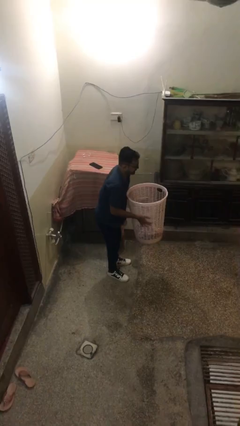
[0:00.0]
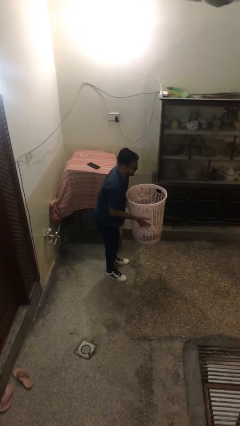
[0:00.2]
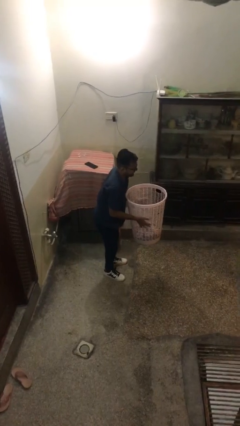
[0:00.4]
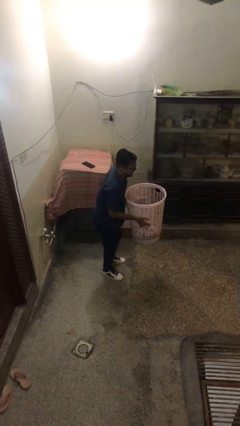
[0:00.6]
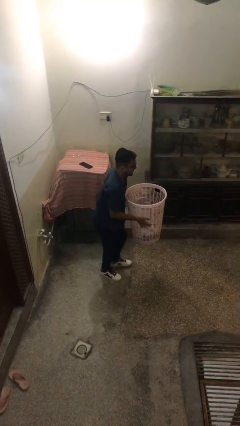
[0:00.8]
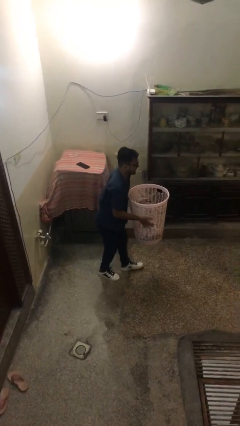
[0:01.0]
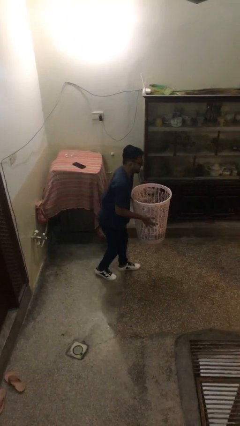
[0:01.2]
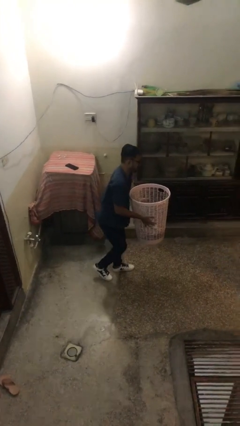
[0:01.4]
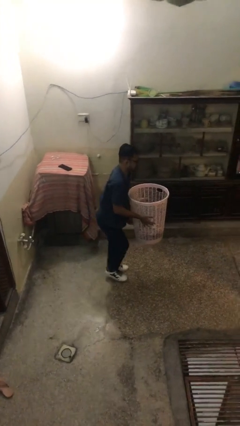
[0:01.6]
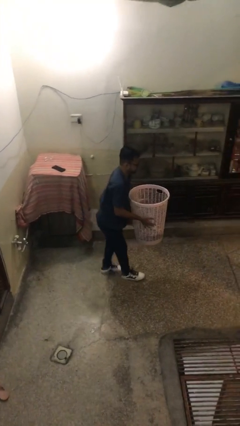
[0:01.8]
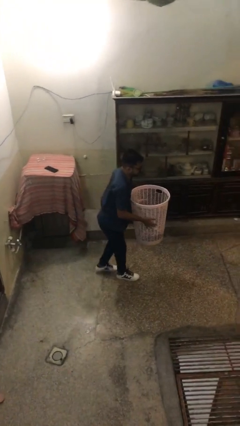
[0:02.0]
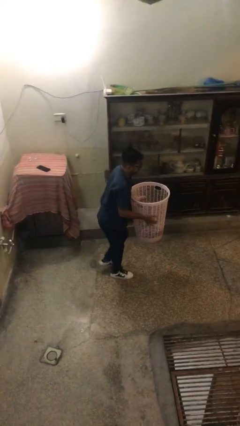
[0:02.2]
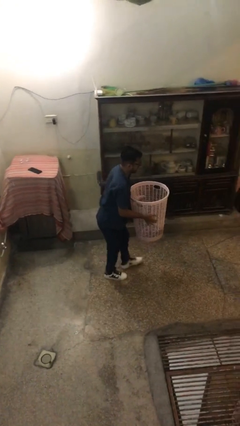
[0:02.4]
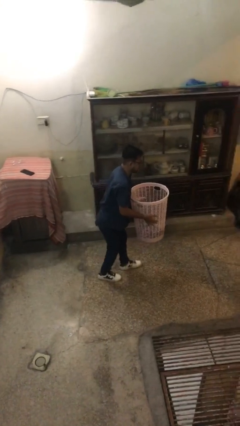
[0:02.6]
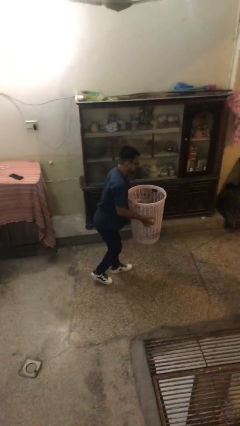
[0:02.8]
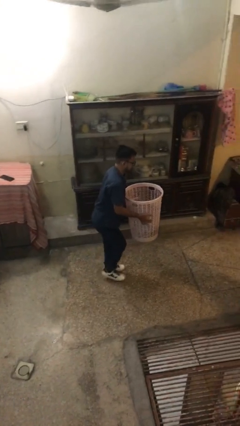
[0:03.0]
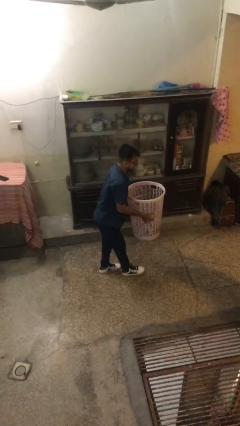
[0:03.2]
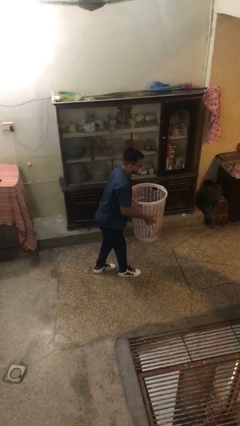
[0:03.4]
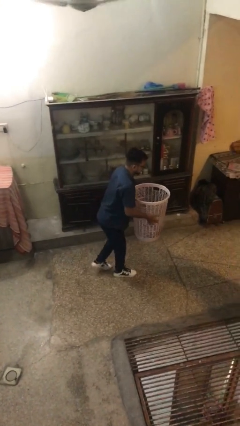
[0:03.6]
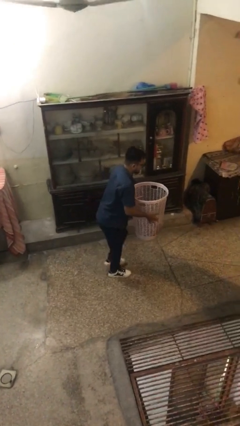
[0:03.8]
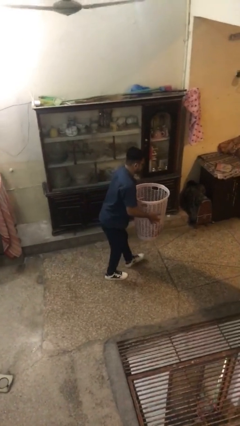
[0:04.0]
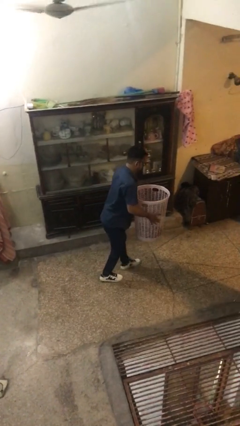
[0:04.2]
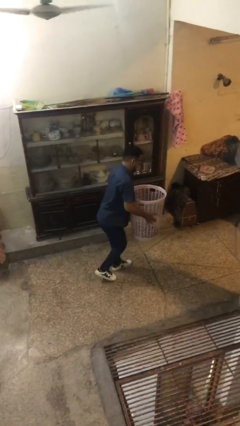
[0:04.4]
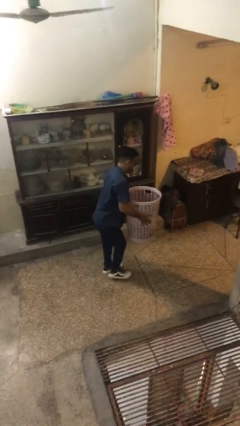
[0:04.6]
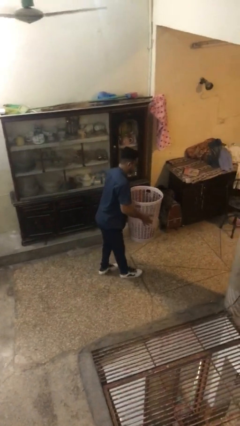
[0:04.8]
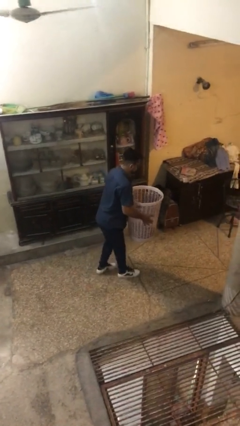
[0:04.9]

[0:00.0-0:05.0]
person carries heavy object

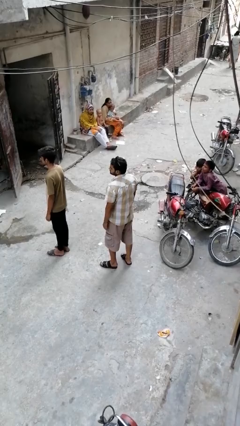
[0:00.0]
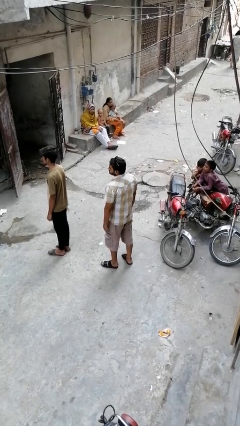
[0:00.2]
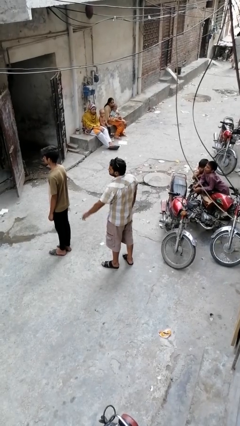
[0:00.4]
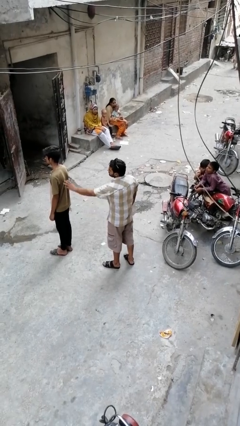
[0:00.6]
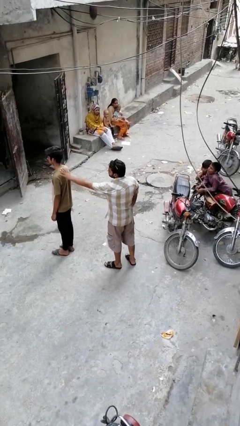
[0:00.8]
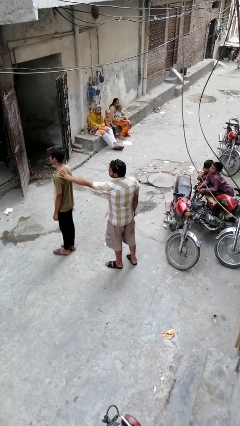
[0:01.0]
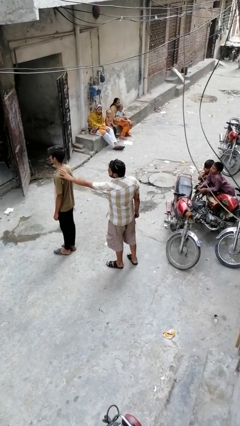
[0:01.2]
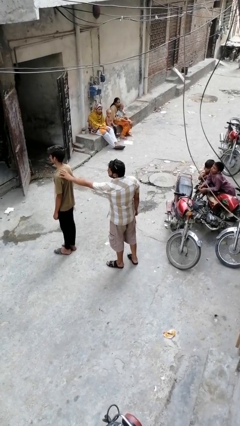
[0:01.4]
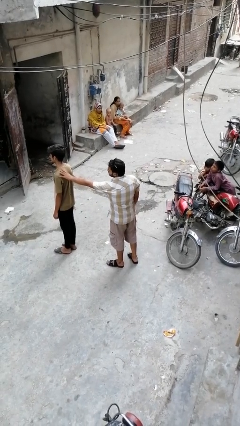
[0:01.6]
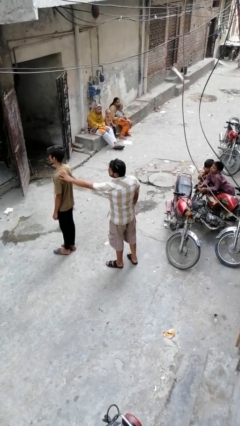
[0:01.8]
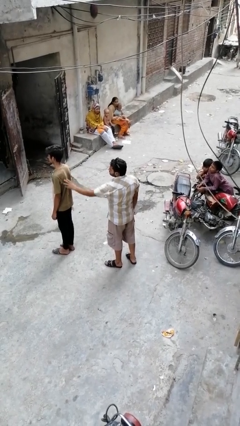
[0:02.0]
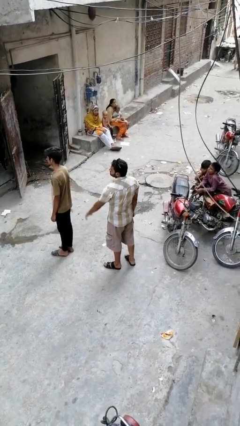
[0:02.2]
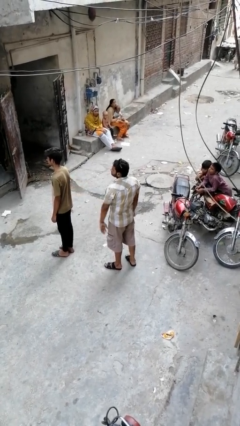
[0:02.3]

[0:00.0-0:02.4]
person touches back of person

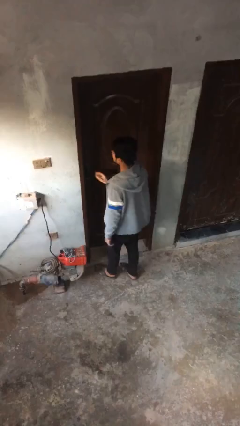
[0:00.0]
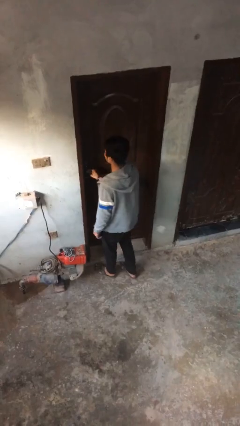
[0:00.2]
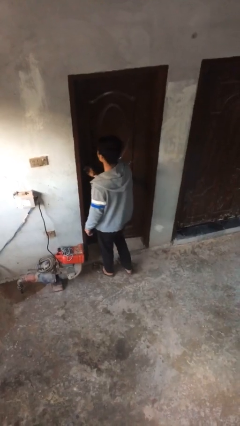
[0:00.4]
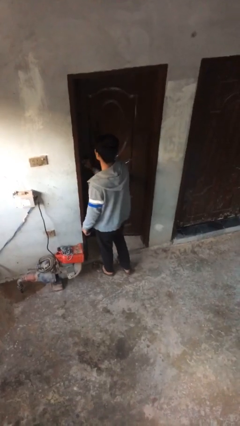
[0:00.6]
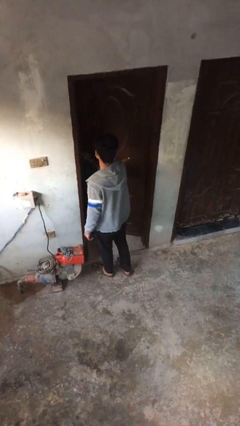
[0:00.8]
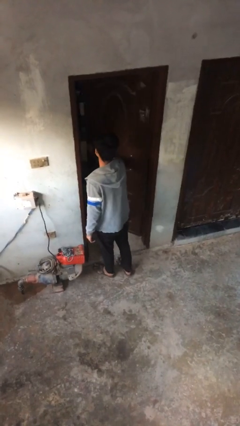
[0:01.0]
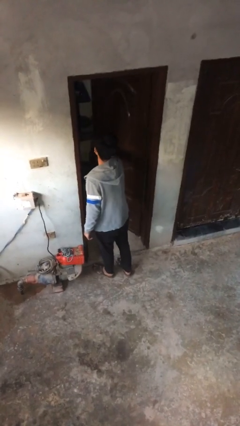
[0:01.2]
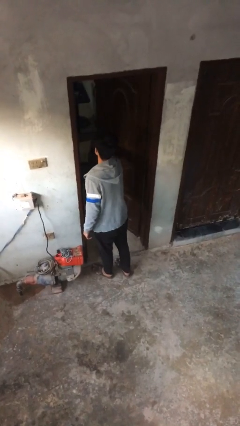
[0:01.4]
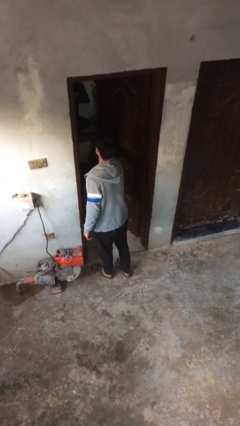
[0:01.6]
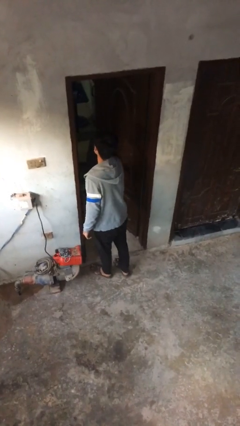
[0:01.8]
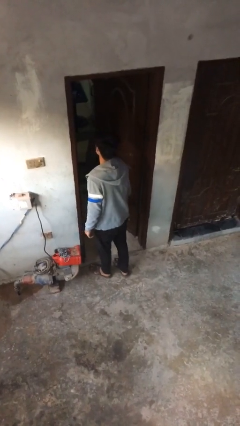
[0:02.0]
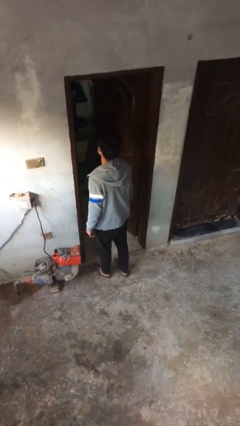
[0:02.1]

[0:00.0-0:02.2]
person opens facility door

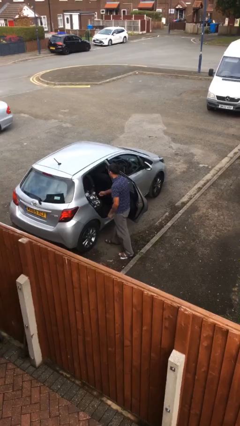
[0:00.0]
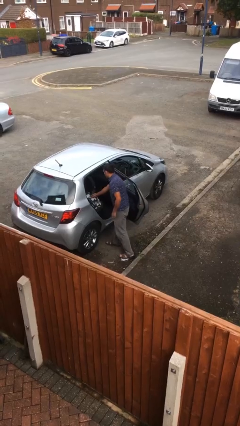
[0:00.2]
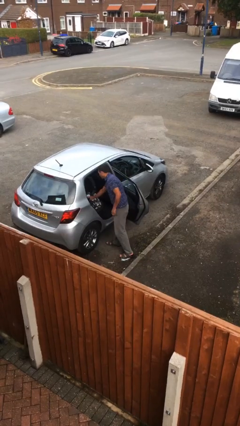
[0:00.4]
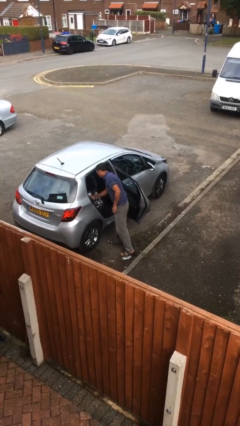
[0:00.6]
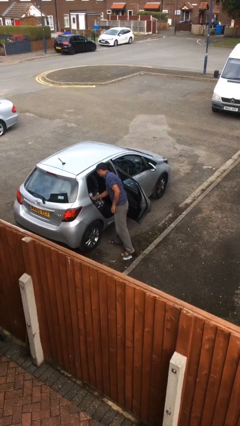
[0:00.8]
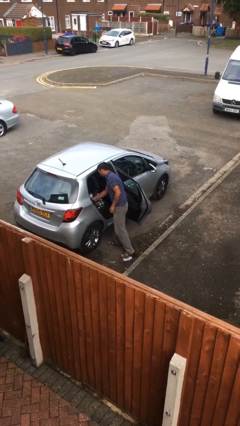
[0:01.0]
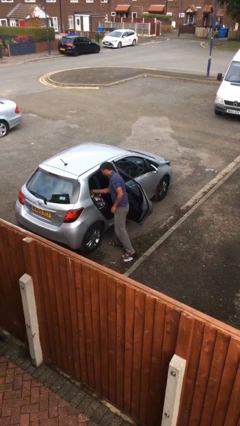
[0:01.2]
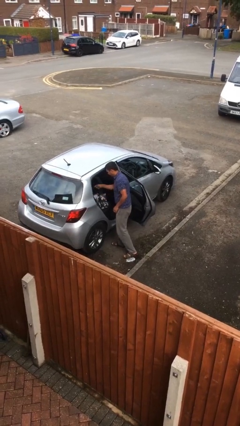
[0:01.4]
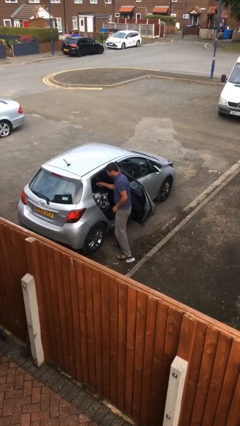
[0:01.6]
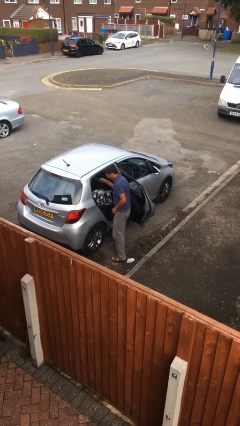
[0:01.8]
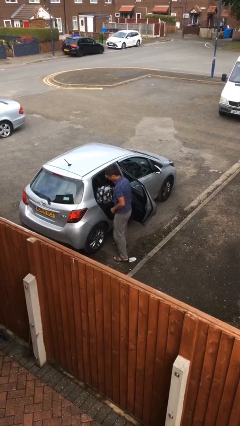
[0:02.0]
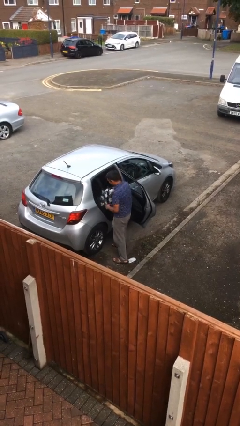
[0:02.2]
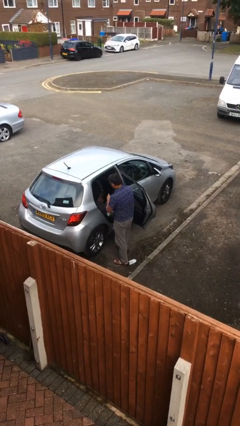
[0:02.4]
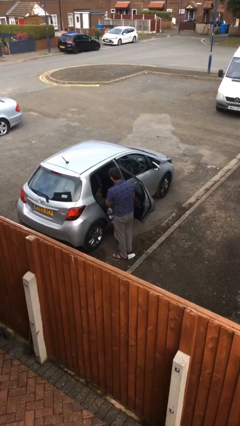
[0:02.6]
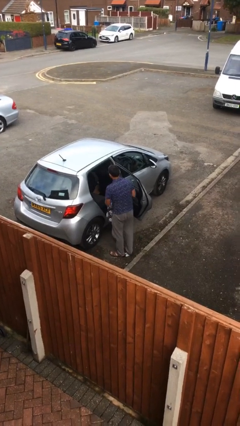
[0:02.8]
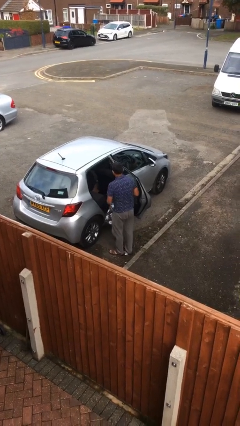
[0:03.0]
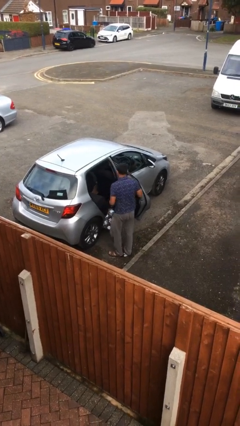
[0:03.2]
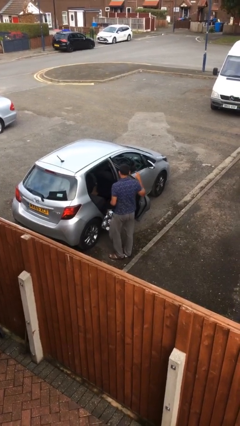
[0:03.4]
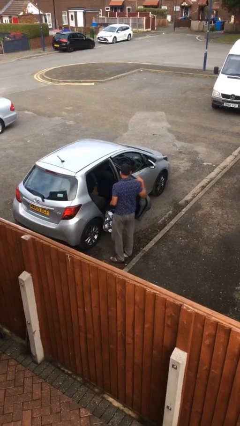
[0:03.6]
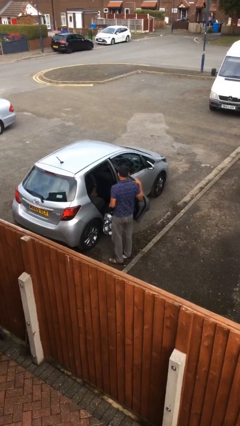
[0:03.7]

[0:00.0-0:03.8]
person unloads car

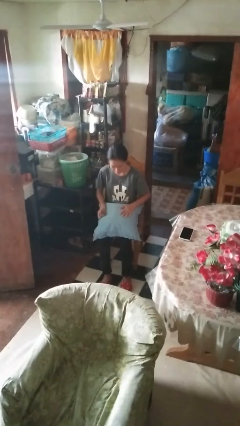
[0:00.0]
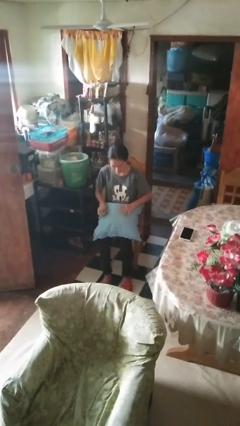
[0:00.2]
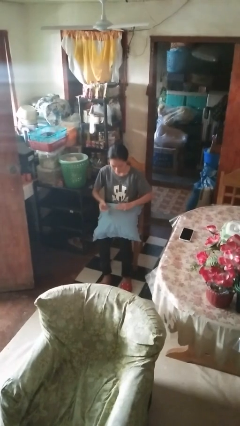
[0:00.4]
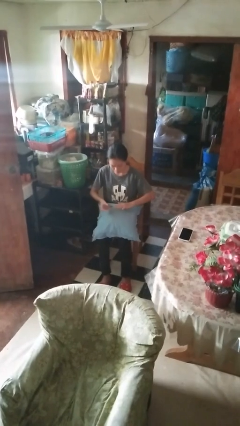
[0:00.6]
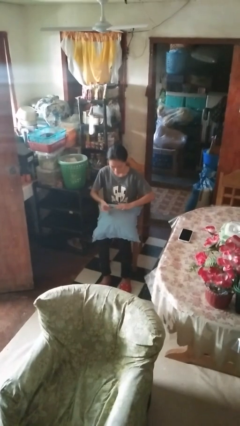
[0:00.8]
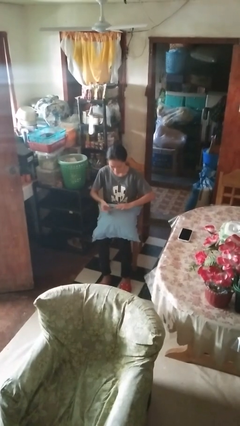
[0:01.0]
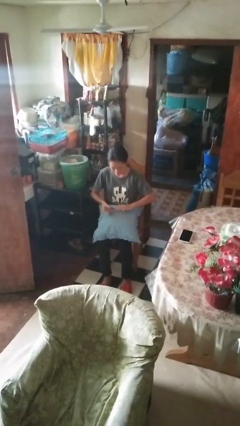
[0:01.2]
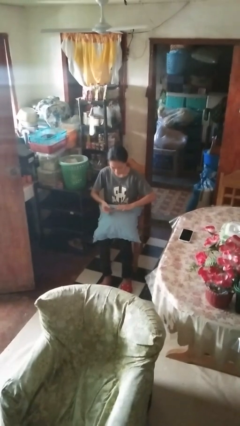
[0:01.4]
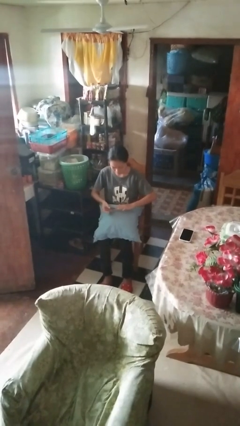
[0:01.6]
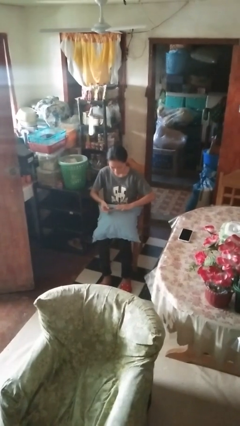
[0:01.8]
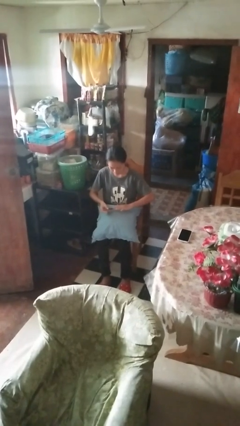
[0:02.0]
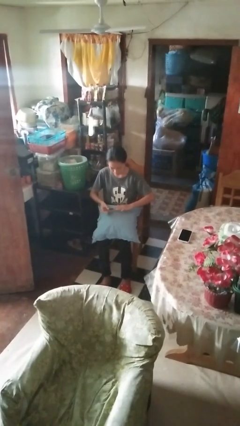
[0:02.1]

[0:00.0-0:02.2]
person clips fingernails

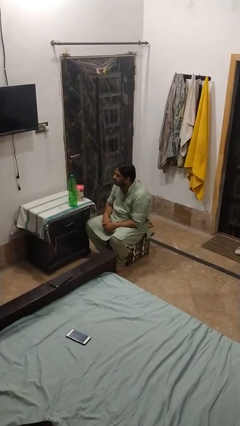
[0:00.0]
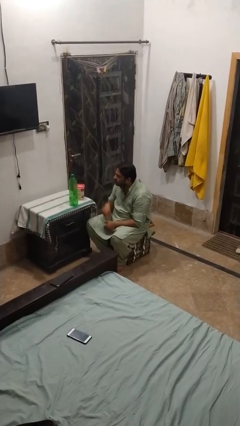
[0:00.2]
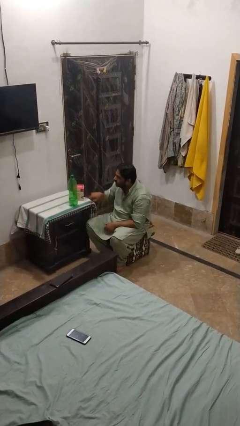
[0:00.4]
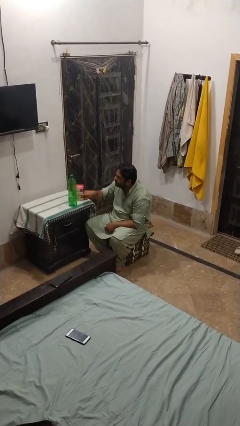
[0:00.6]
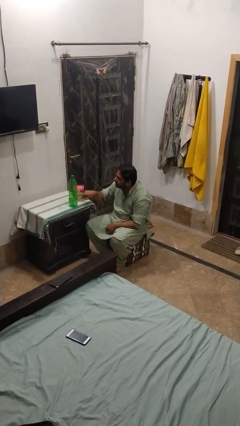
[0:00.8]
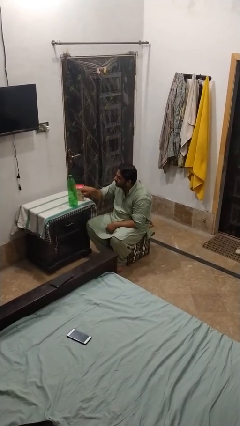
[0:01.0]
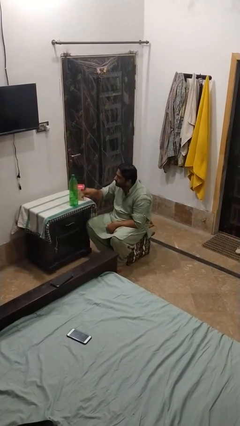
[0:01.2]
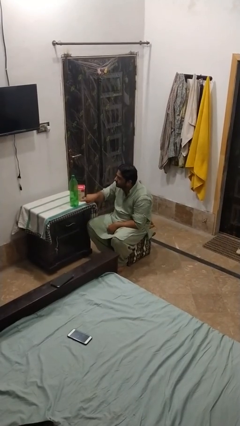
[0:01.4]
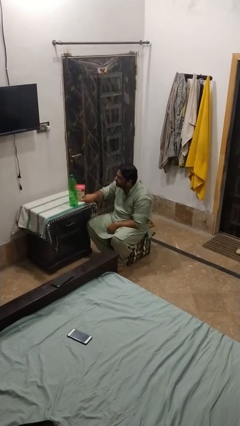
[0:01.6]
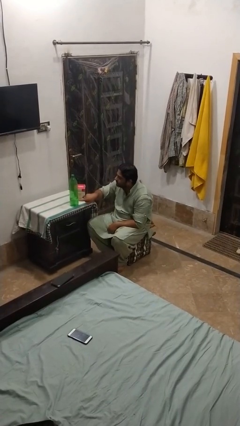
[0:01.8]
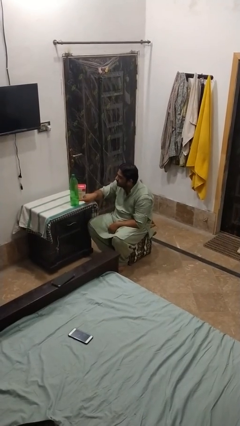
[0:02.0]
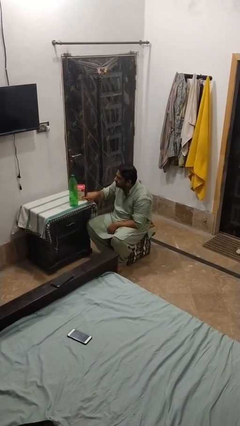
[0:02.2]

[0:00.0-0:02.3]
person taps object with finger
